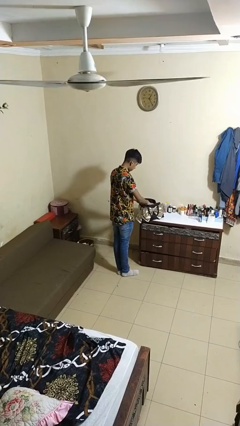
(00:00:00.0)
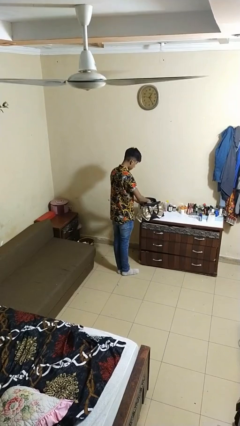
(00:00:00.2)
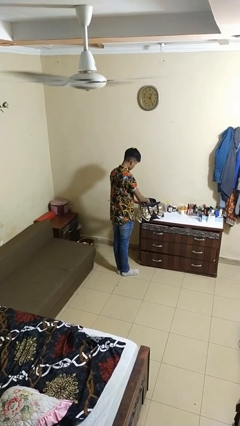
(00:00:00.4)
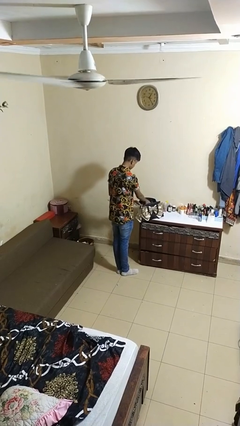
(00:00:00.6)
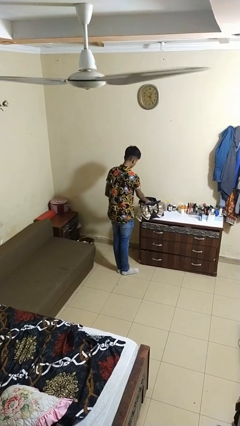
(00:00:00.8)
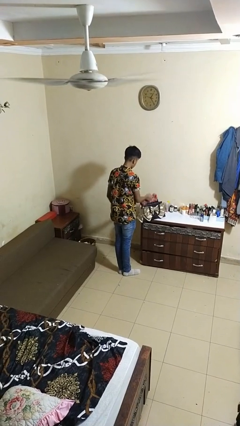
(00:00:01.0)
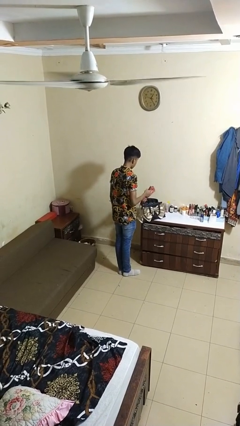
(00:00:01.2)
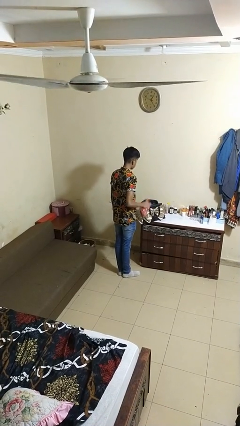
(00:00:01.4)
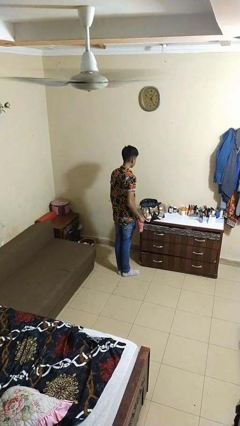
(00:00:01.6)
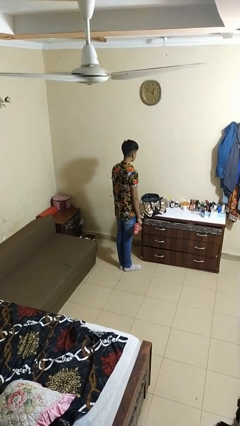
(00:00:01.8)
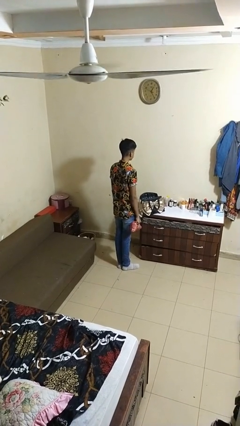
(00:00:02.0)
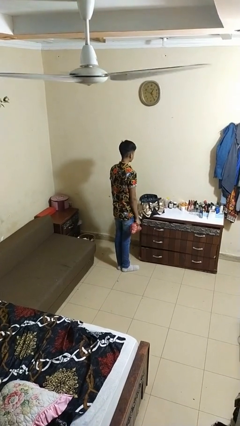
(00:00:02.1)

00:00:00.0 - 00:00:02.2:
person takes object from purse

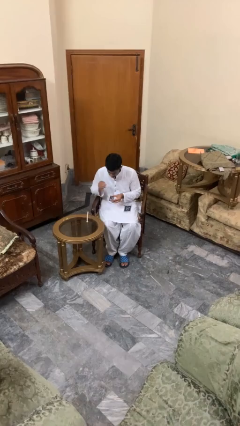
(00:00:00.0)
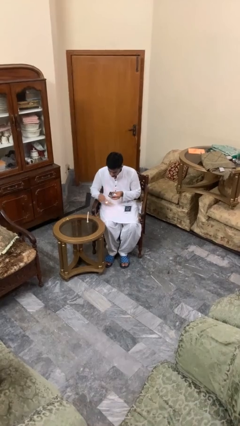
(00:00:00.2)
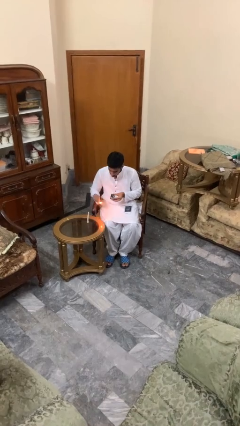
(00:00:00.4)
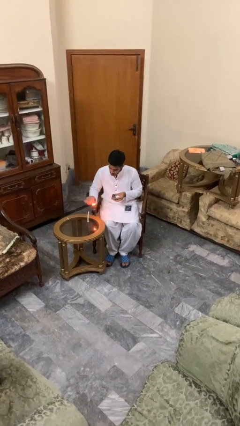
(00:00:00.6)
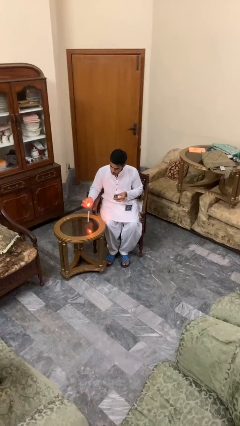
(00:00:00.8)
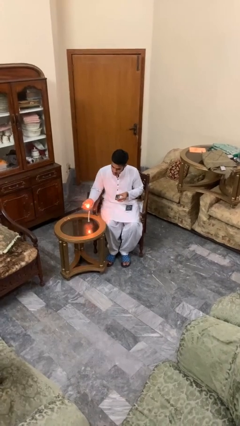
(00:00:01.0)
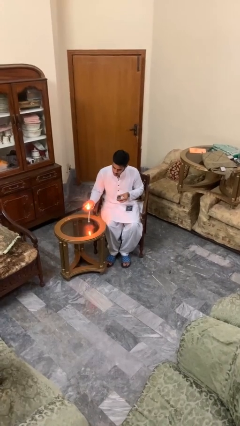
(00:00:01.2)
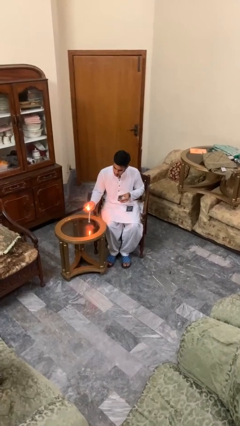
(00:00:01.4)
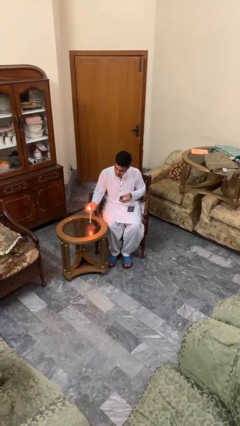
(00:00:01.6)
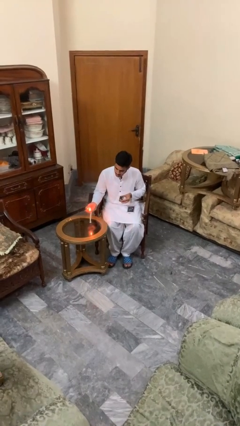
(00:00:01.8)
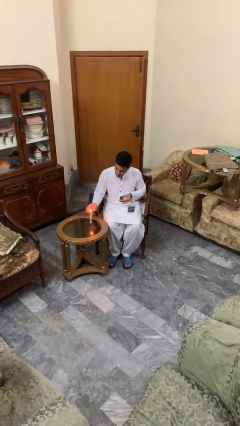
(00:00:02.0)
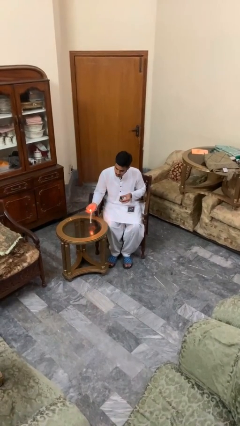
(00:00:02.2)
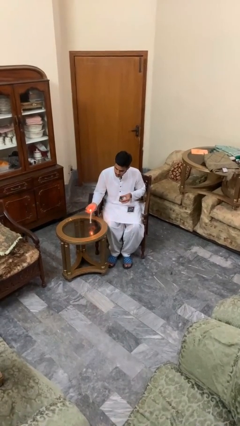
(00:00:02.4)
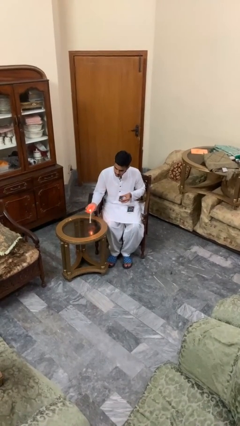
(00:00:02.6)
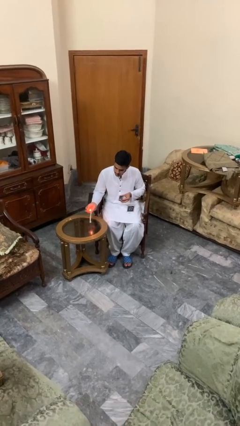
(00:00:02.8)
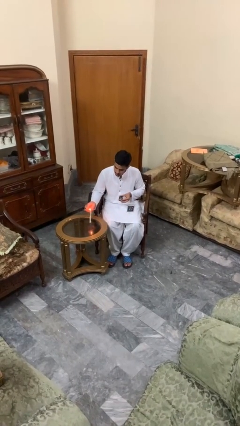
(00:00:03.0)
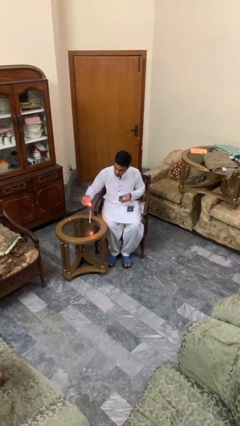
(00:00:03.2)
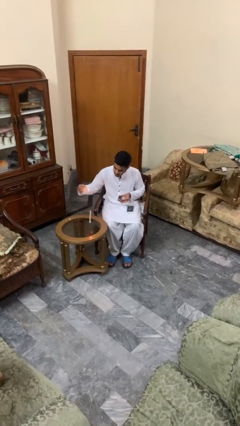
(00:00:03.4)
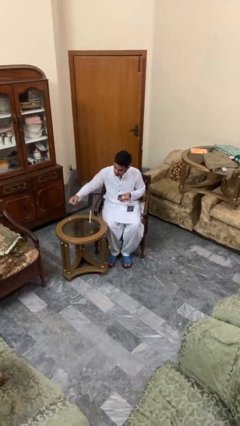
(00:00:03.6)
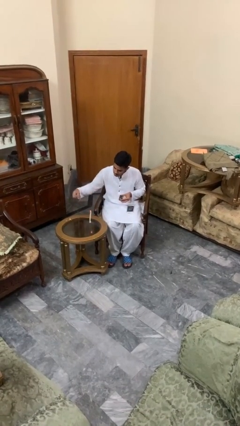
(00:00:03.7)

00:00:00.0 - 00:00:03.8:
person lights candle

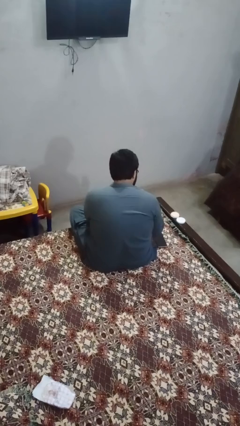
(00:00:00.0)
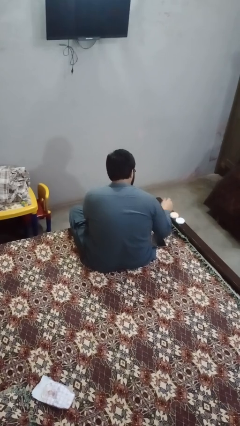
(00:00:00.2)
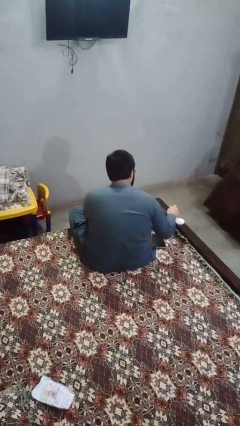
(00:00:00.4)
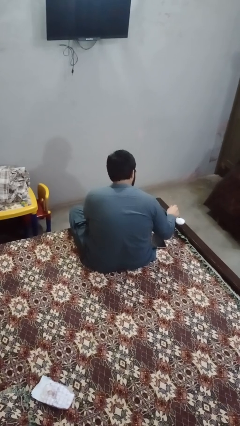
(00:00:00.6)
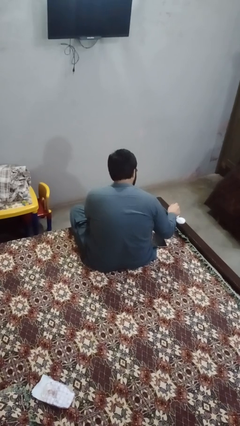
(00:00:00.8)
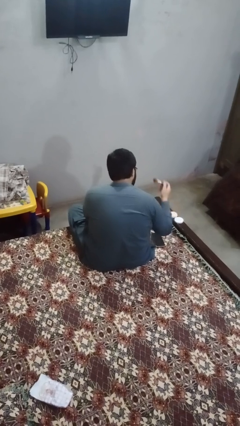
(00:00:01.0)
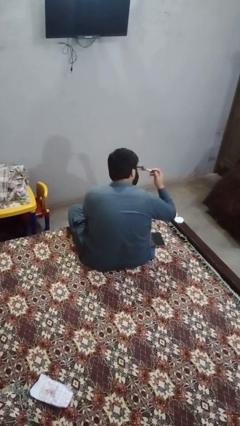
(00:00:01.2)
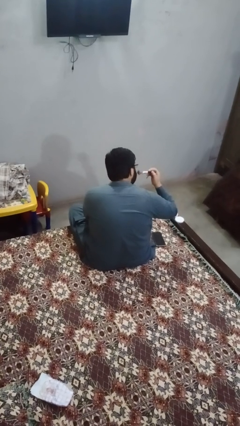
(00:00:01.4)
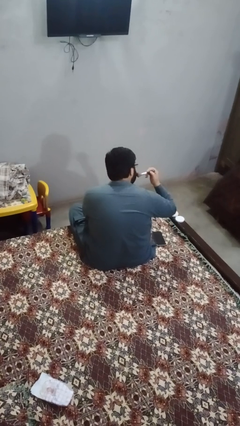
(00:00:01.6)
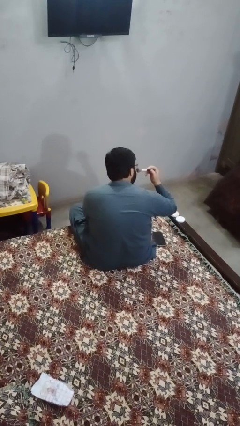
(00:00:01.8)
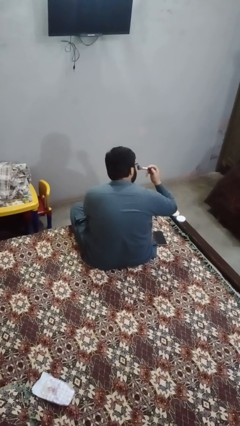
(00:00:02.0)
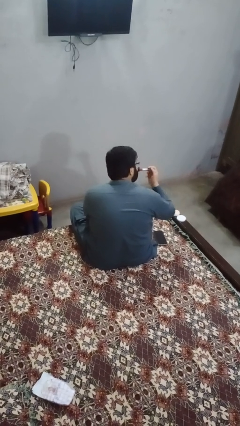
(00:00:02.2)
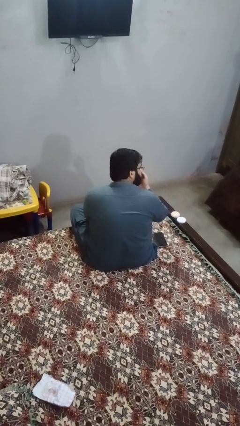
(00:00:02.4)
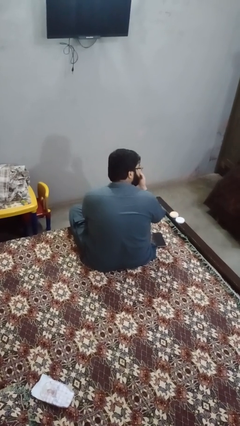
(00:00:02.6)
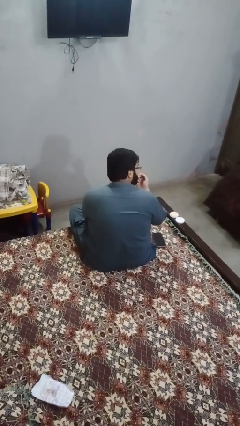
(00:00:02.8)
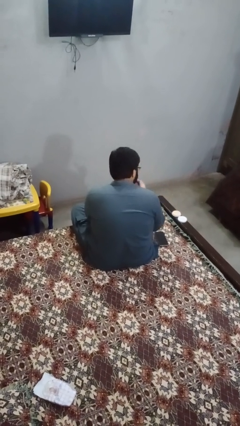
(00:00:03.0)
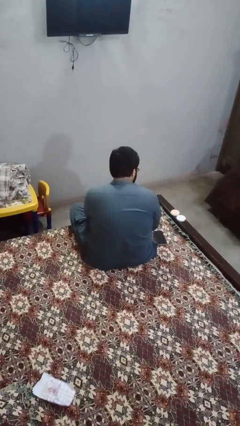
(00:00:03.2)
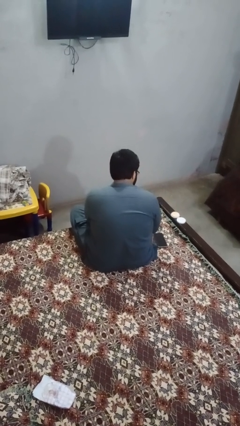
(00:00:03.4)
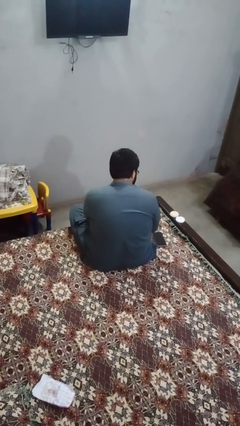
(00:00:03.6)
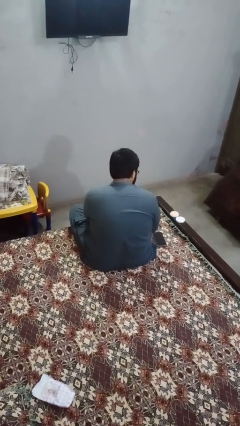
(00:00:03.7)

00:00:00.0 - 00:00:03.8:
person applies foundation makeup

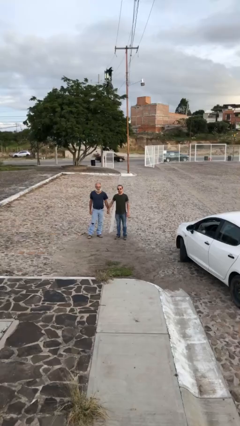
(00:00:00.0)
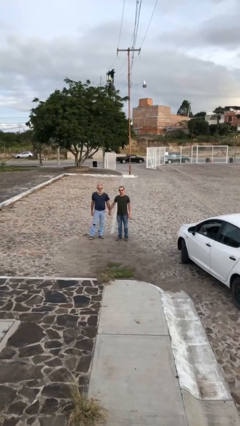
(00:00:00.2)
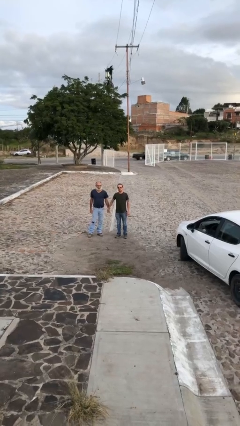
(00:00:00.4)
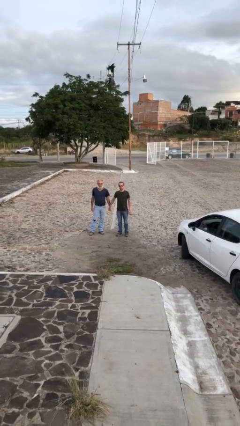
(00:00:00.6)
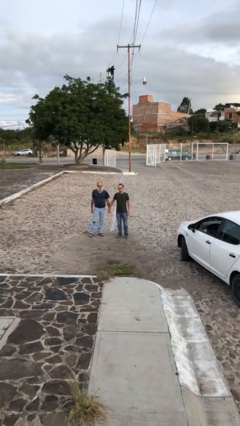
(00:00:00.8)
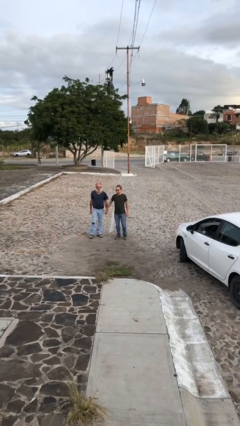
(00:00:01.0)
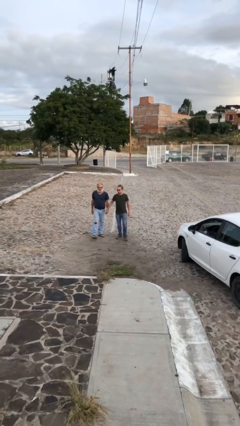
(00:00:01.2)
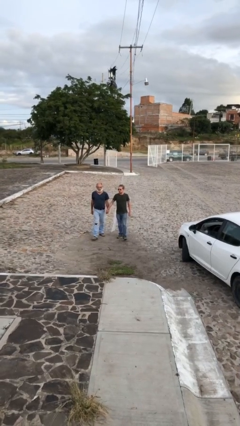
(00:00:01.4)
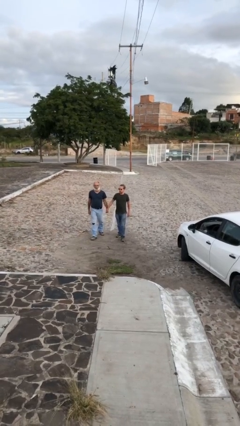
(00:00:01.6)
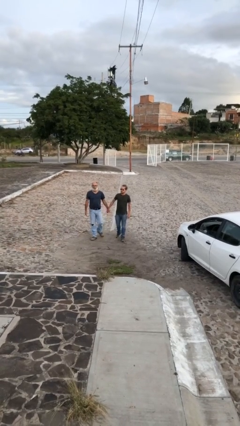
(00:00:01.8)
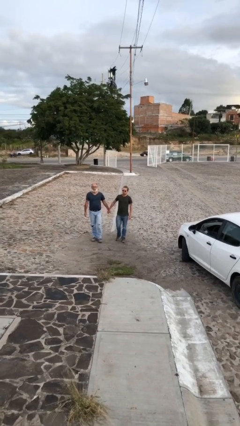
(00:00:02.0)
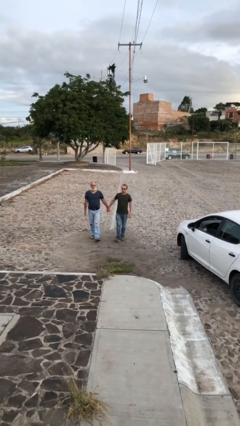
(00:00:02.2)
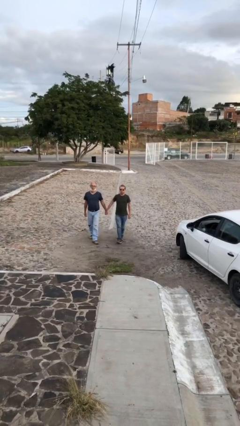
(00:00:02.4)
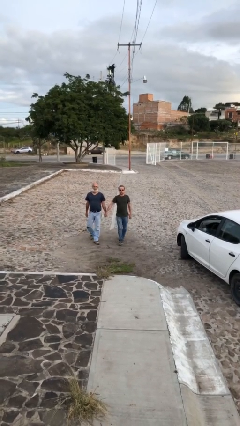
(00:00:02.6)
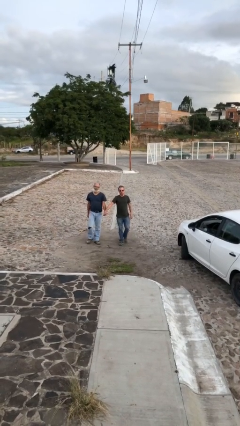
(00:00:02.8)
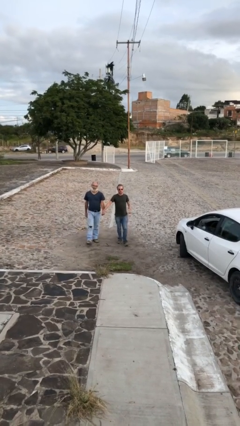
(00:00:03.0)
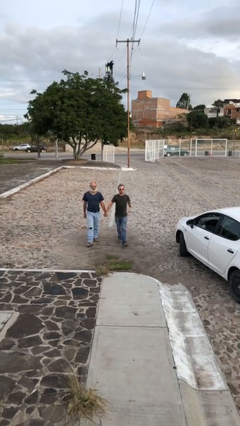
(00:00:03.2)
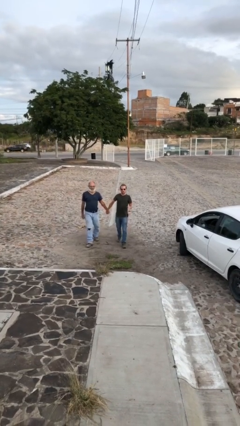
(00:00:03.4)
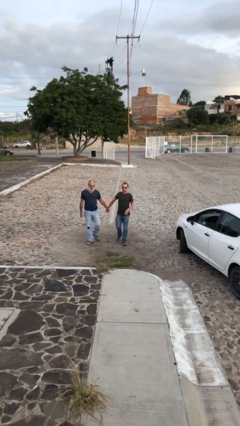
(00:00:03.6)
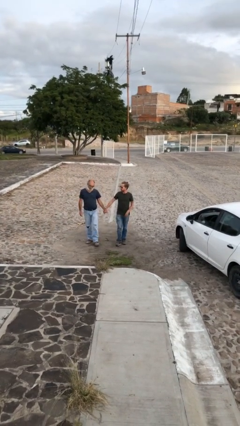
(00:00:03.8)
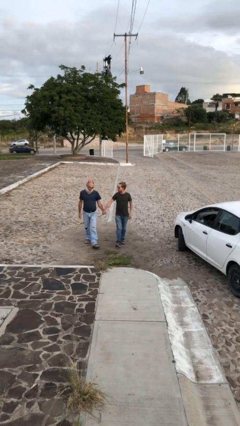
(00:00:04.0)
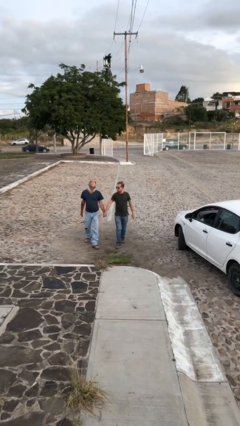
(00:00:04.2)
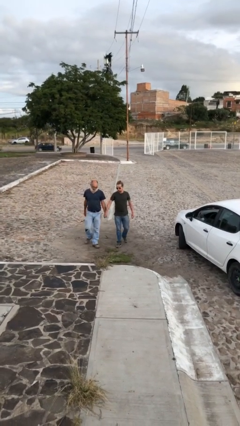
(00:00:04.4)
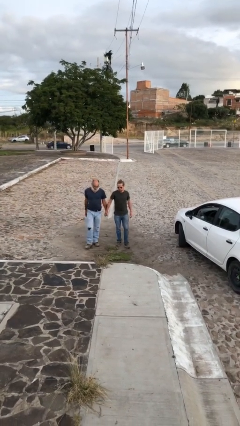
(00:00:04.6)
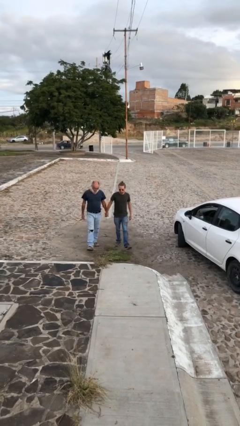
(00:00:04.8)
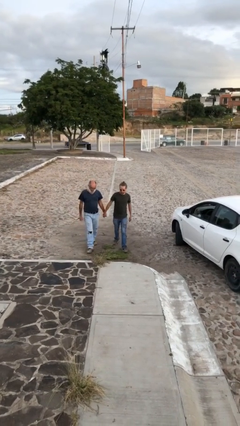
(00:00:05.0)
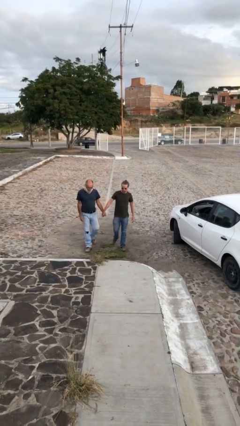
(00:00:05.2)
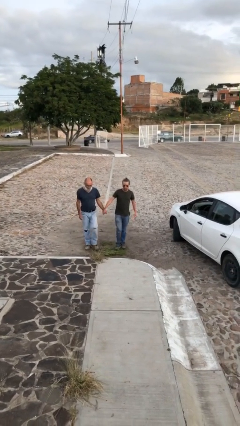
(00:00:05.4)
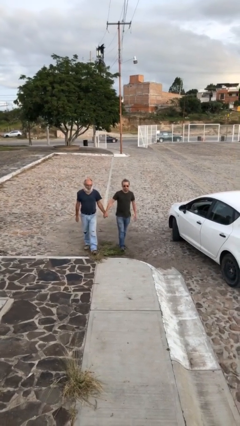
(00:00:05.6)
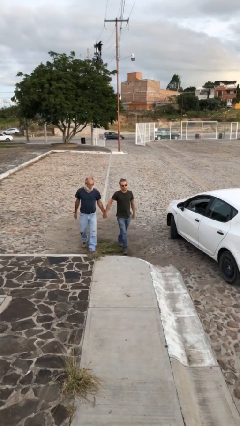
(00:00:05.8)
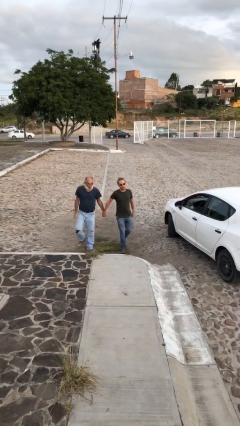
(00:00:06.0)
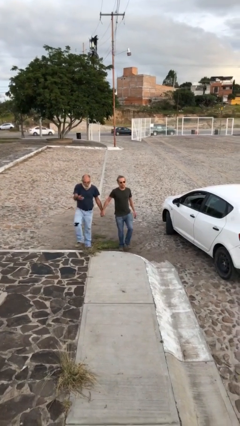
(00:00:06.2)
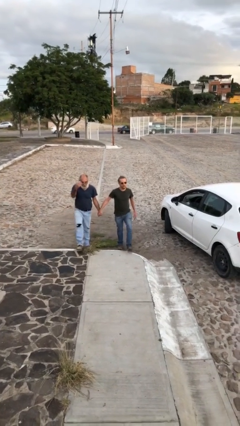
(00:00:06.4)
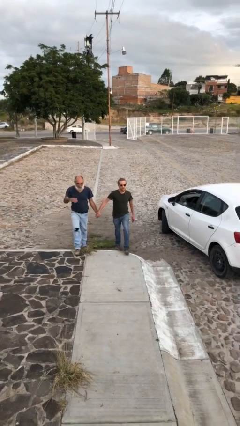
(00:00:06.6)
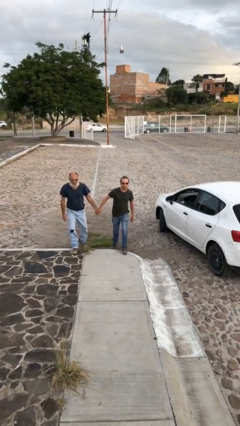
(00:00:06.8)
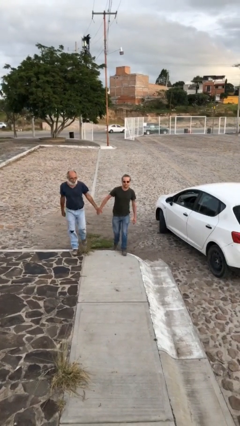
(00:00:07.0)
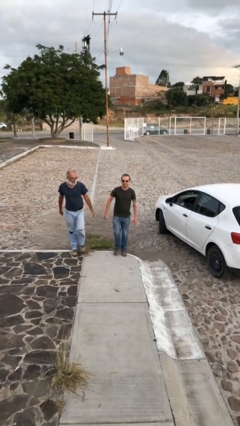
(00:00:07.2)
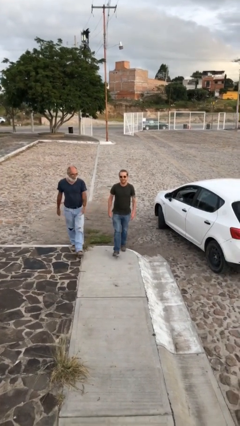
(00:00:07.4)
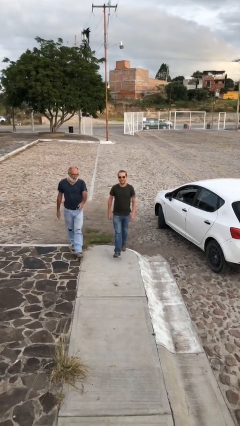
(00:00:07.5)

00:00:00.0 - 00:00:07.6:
person holds hand
